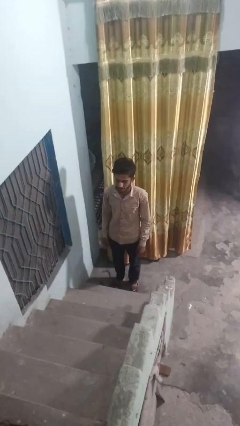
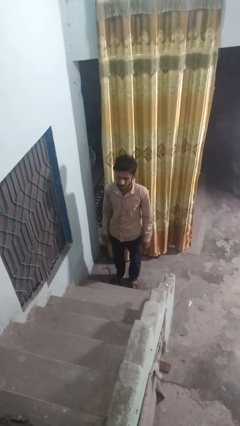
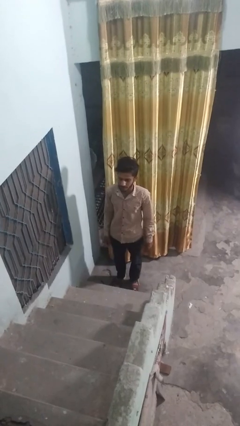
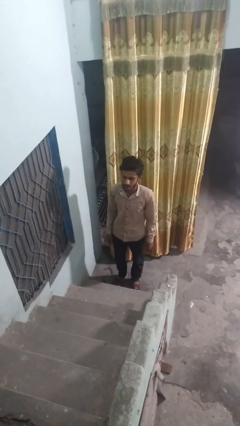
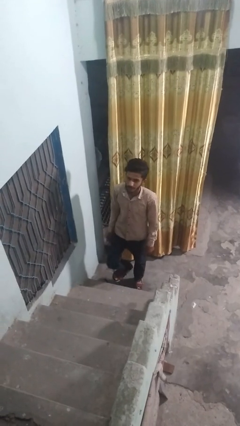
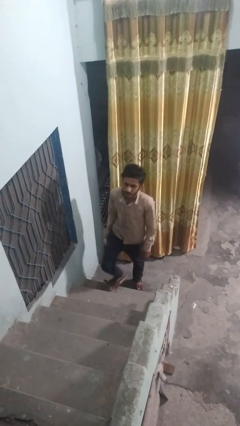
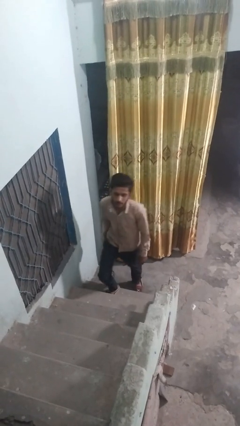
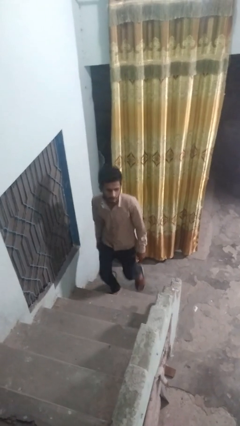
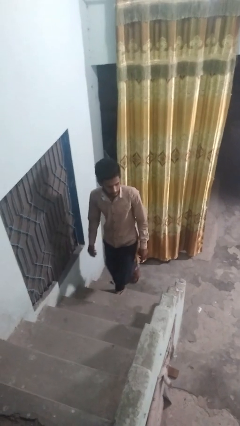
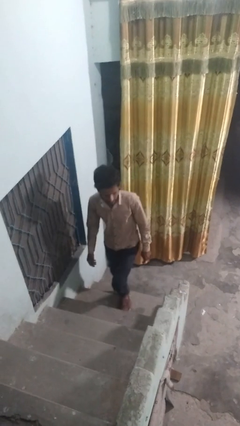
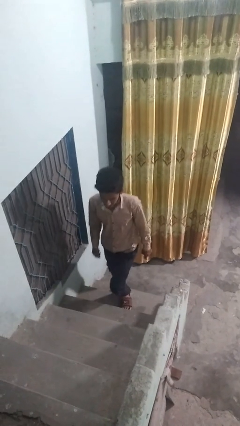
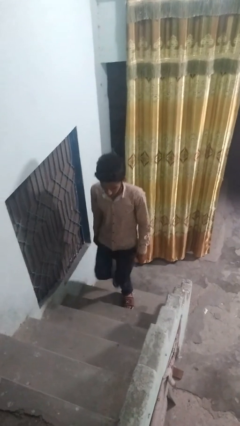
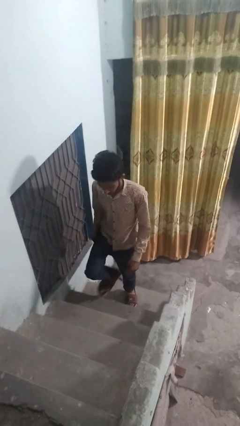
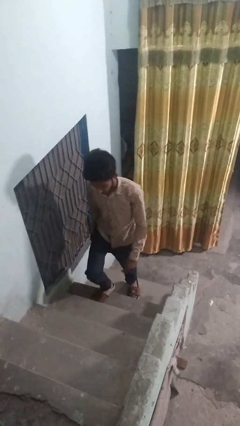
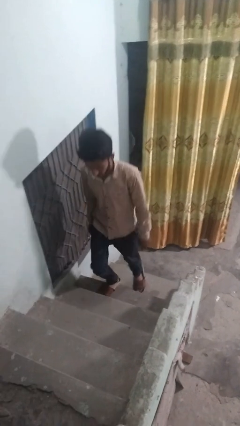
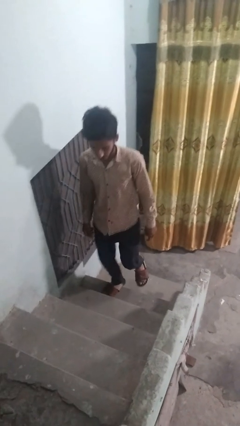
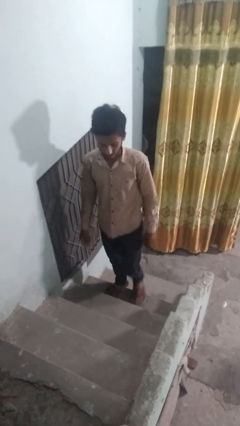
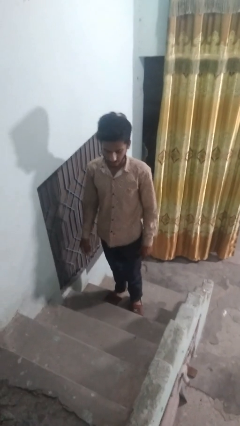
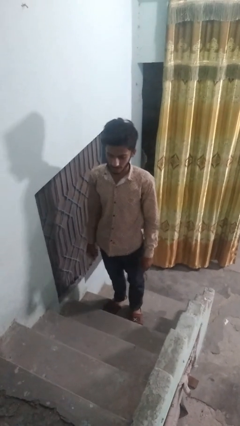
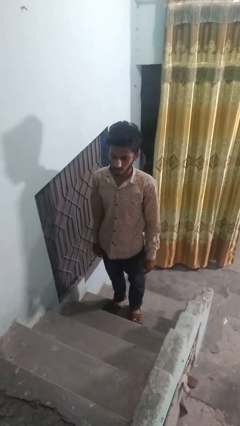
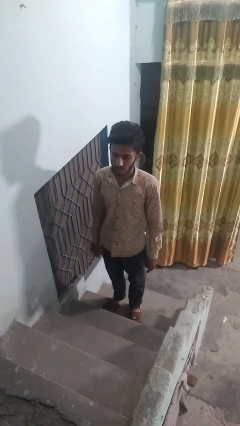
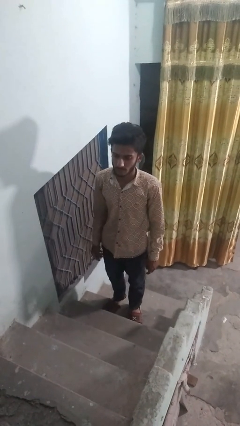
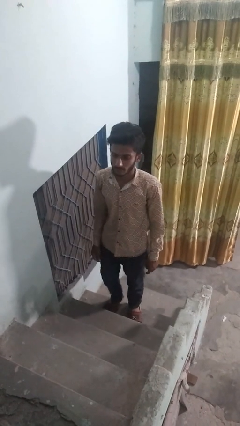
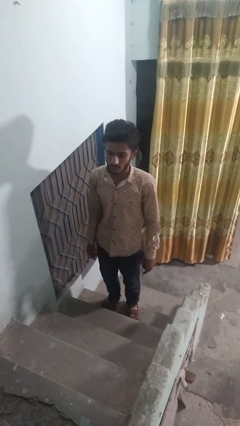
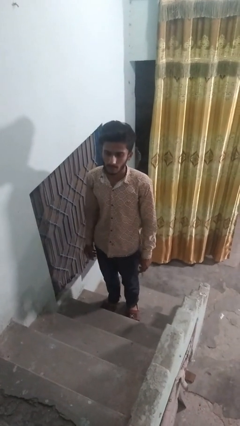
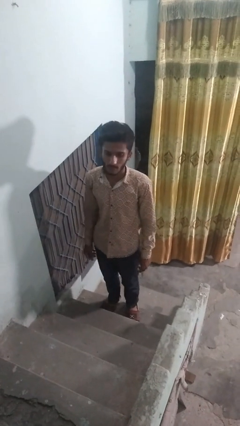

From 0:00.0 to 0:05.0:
person climbs up stairs

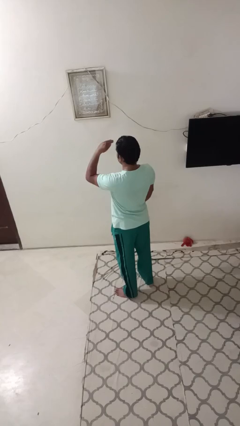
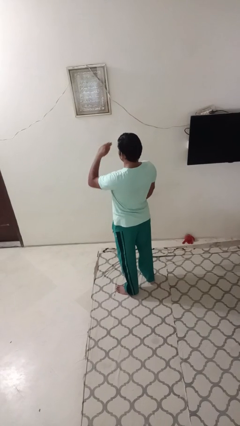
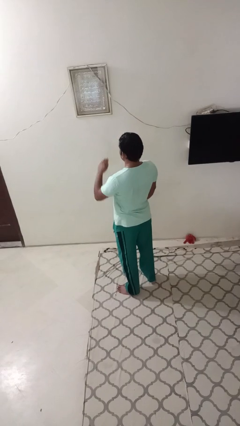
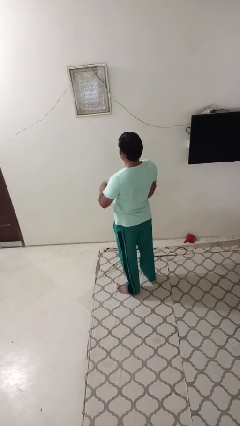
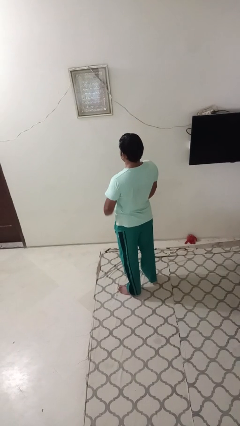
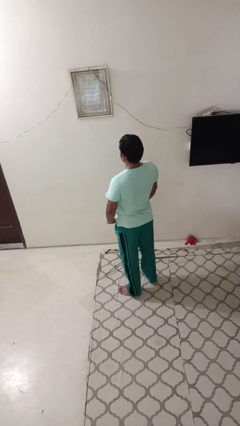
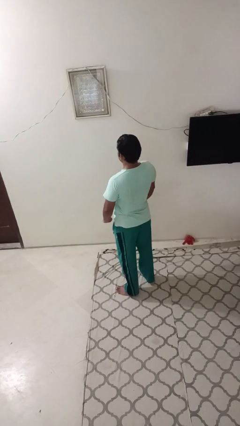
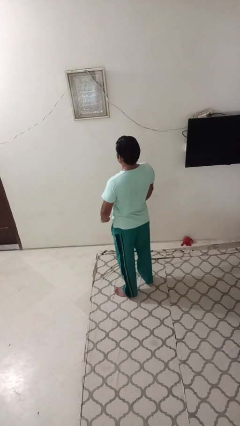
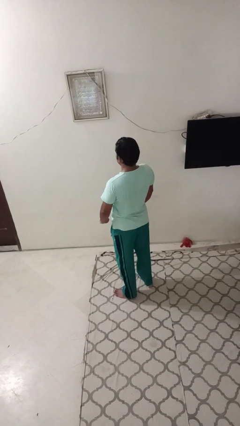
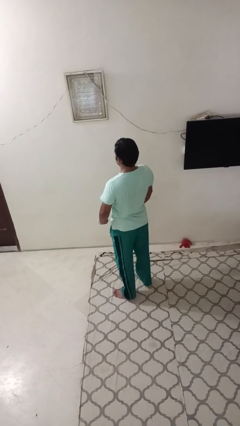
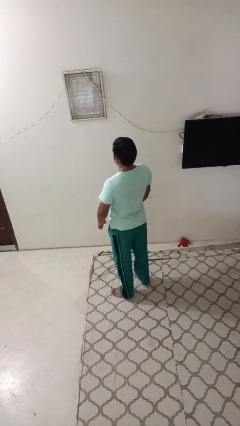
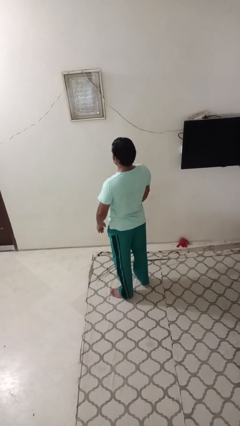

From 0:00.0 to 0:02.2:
person gestures swipe down

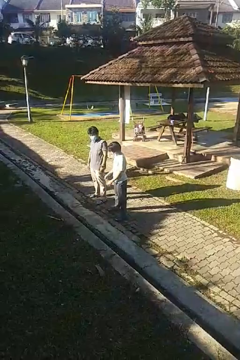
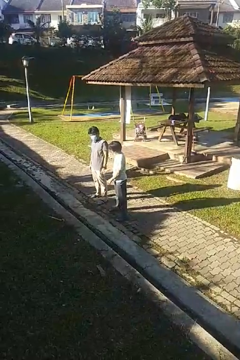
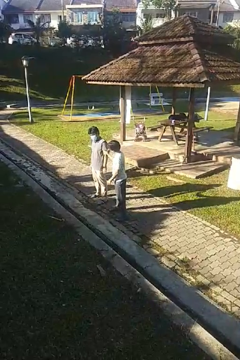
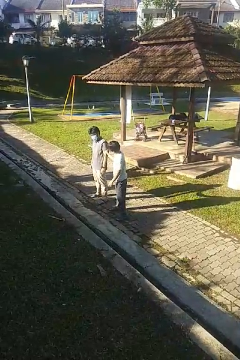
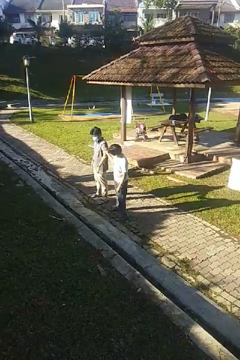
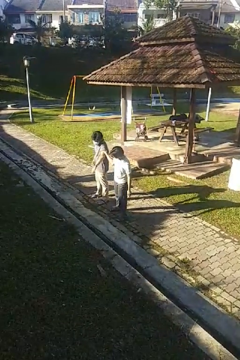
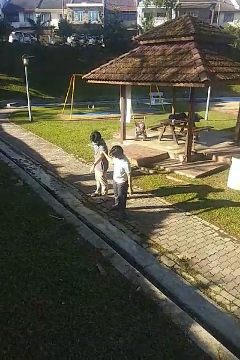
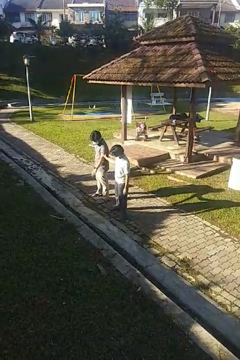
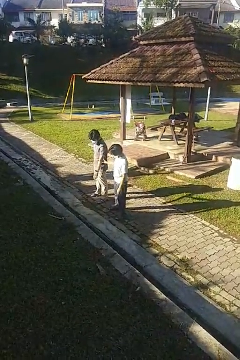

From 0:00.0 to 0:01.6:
person grabs person by bicep

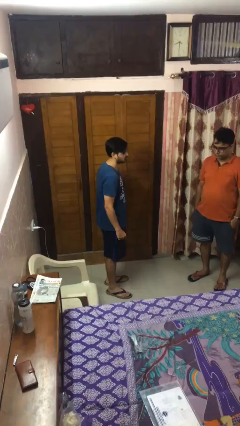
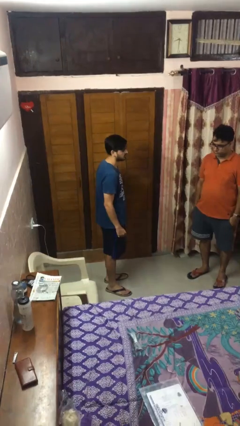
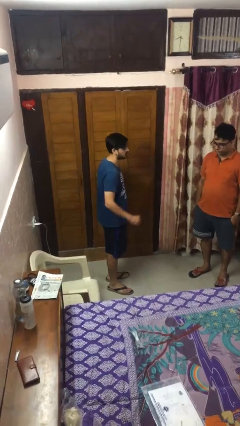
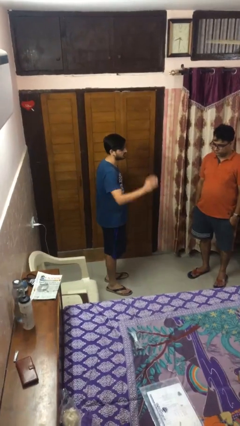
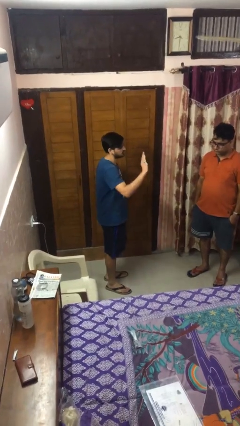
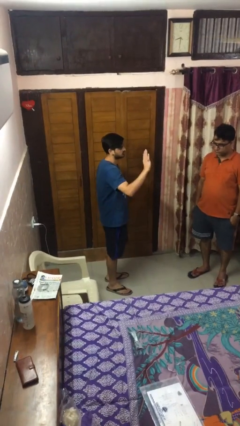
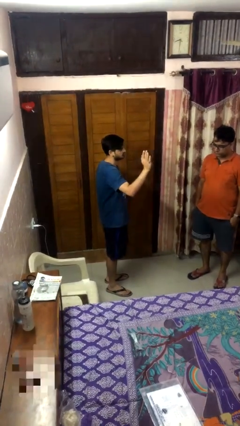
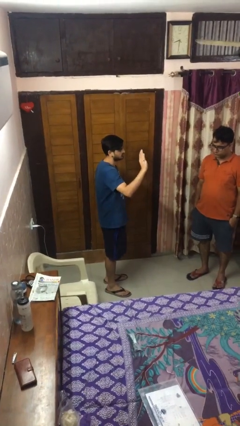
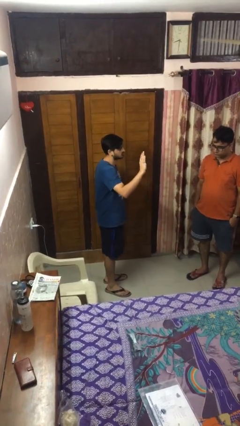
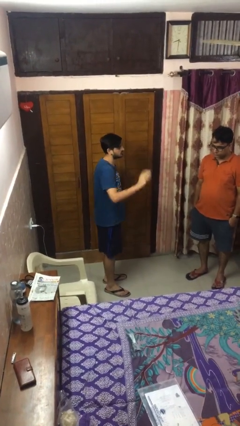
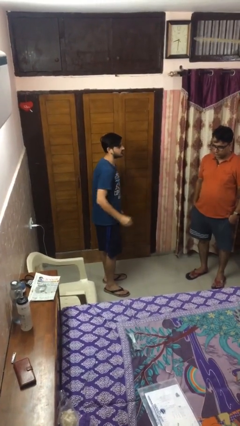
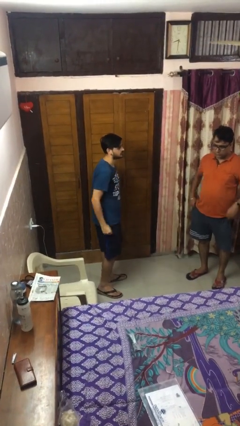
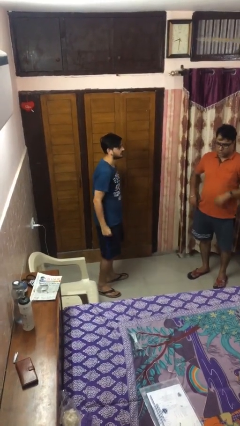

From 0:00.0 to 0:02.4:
person waves at person

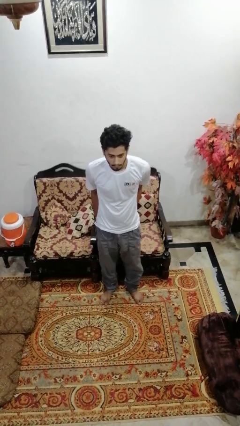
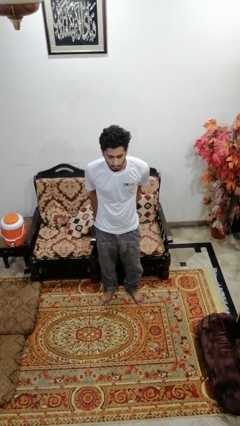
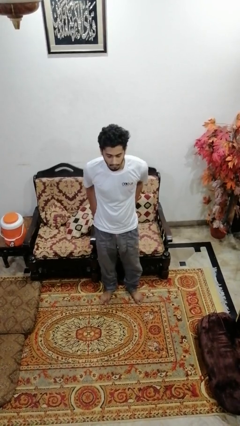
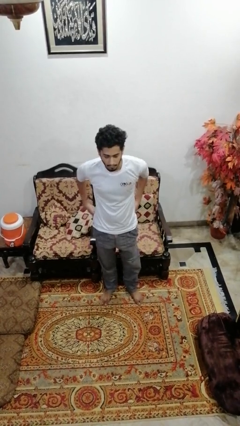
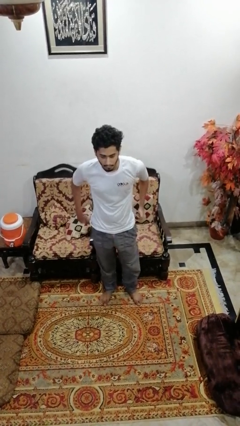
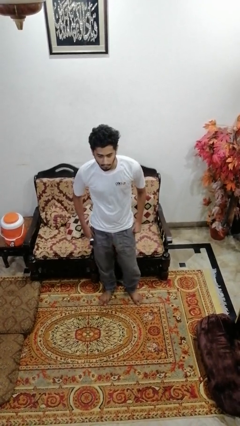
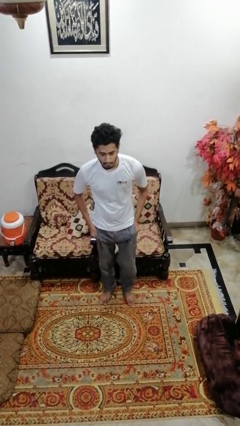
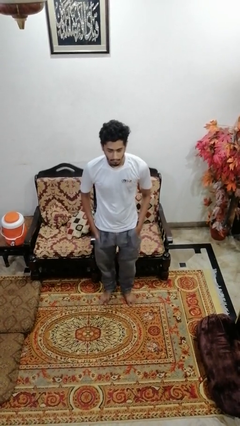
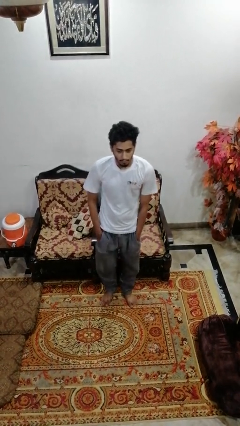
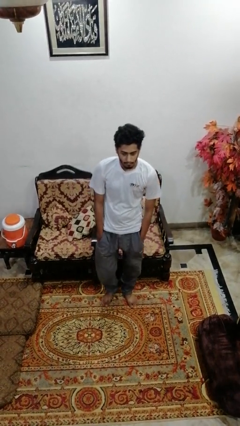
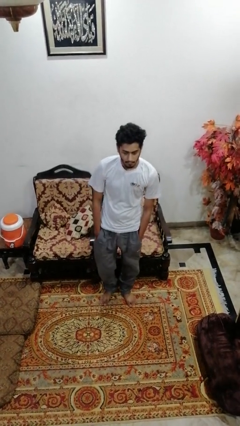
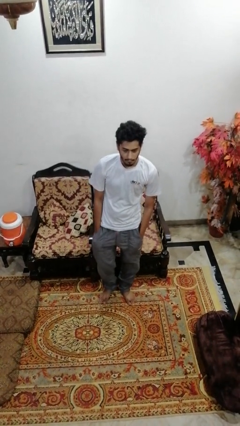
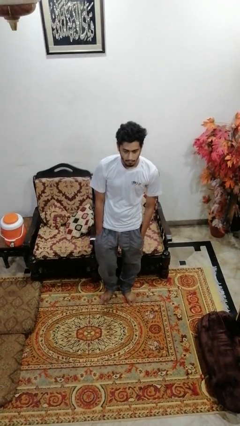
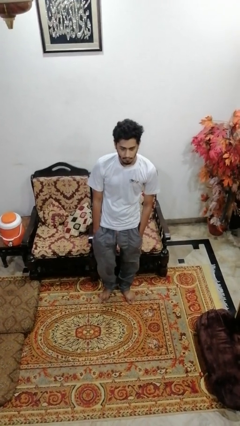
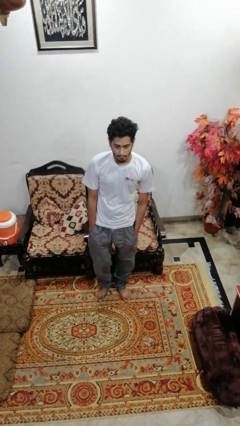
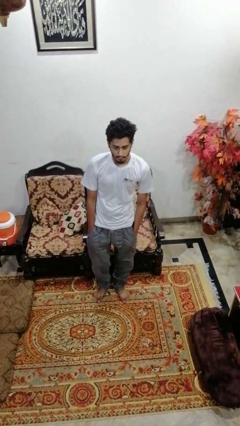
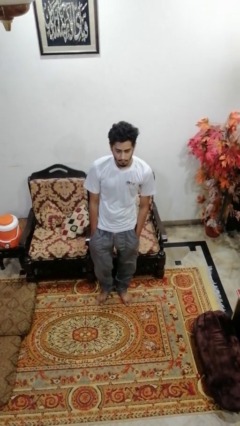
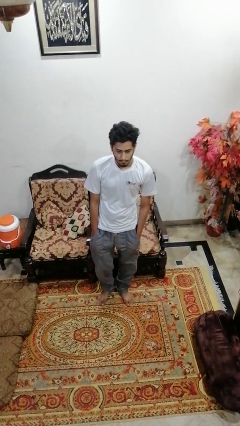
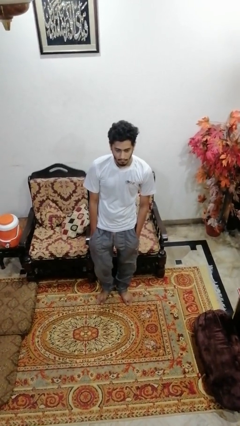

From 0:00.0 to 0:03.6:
person puts hands in back pockets

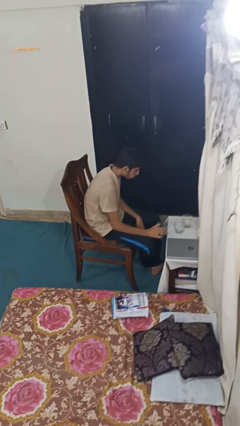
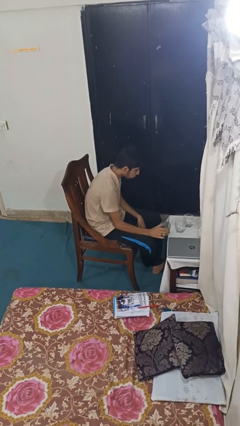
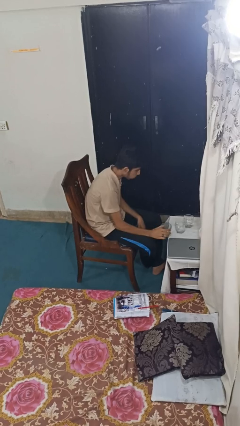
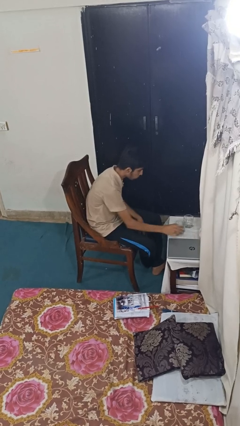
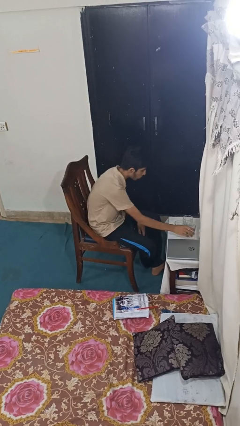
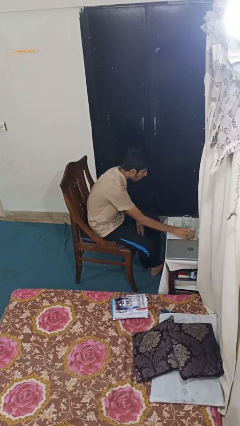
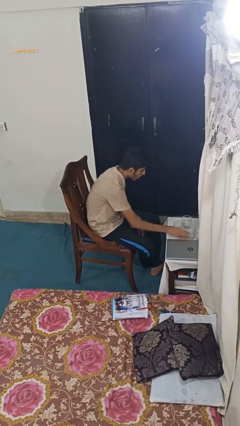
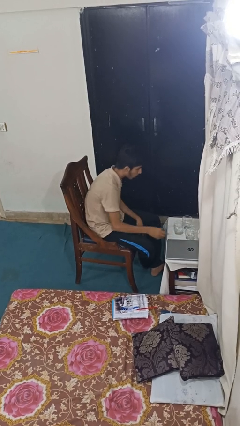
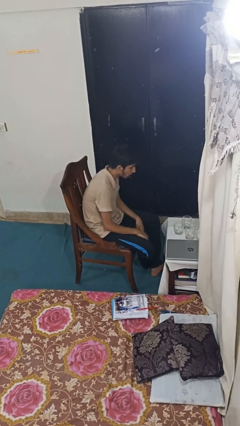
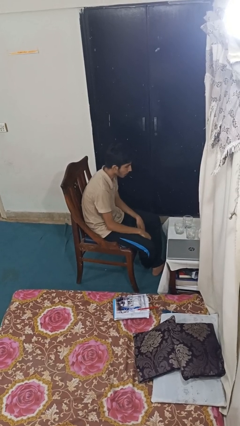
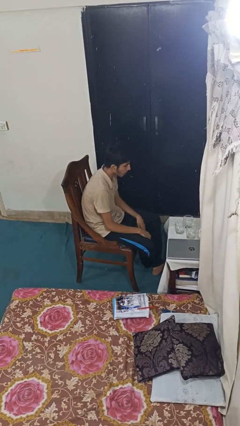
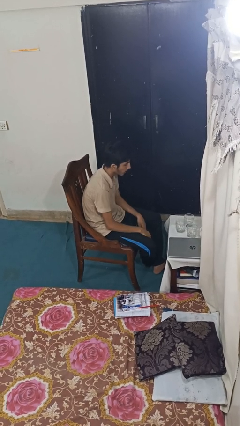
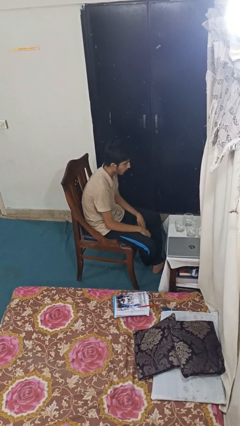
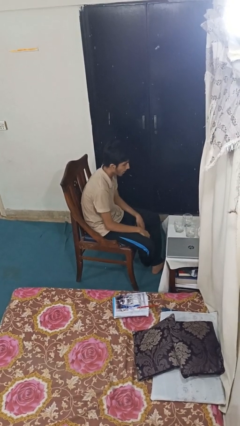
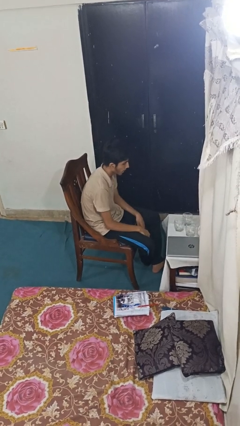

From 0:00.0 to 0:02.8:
person puts down object on table
